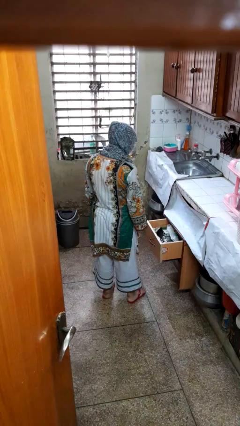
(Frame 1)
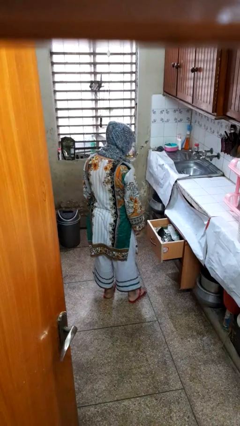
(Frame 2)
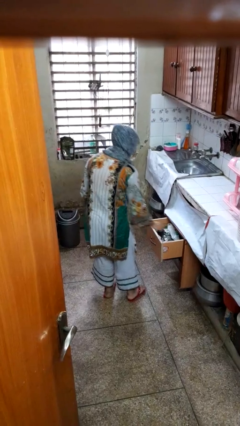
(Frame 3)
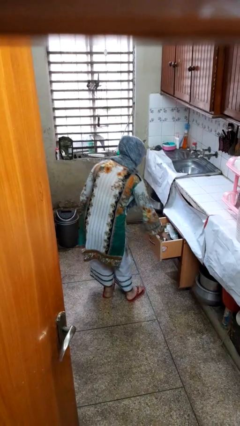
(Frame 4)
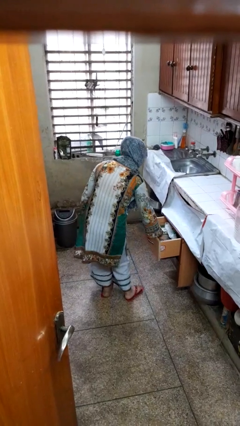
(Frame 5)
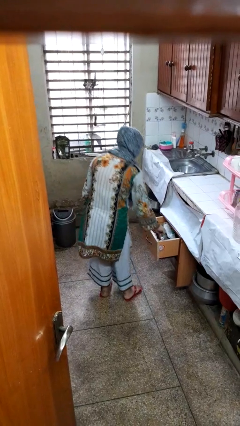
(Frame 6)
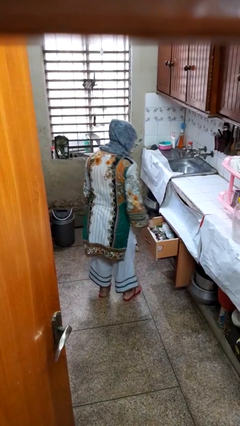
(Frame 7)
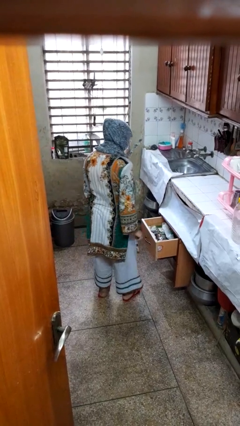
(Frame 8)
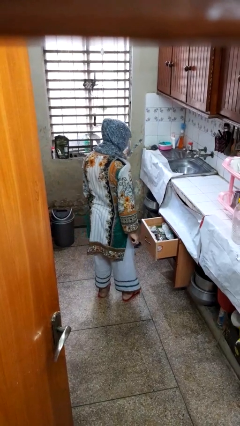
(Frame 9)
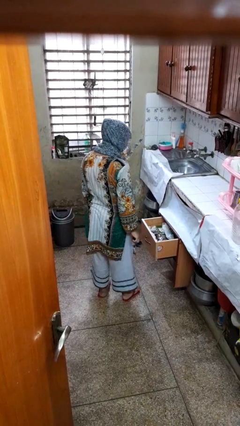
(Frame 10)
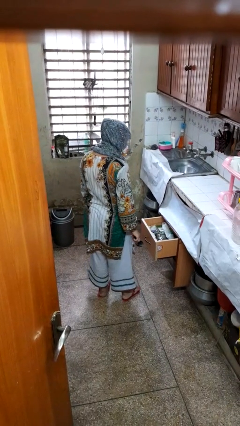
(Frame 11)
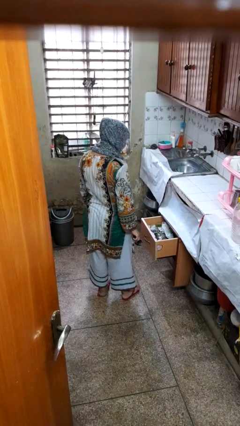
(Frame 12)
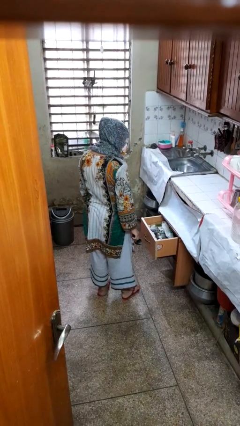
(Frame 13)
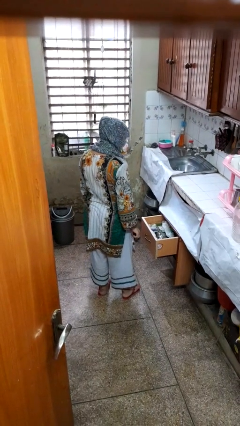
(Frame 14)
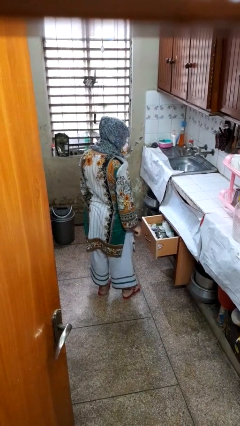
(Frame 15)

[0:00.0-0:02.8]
person takes object from kitchen drawer

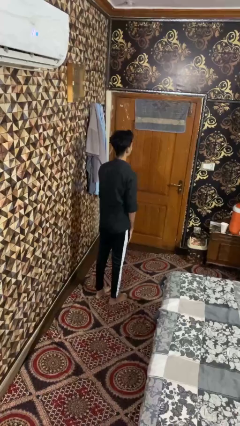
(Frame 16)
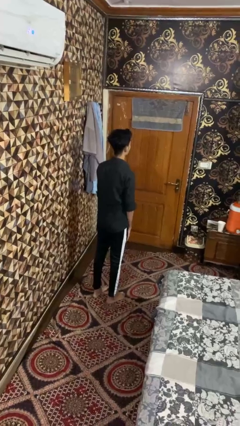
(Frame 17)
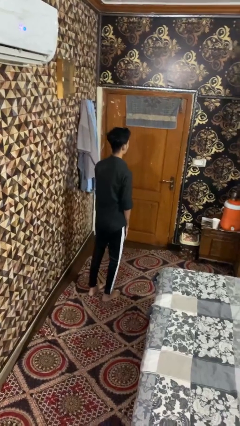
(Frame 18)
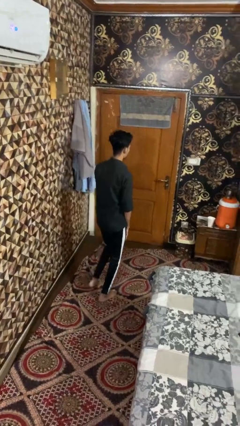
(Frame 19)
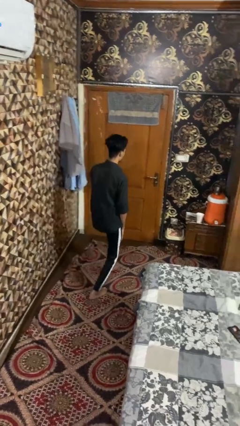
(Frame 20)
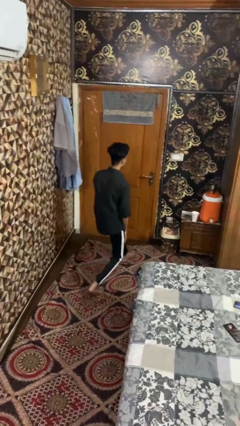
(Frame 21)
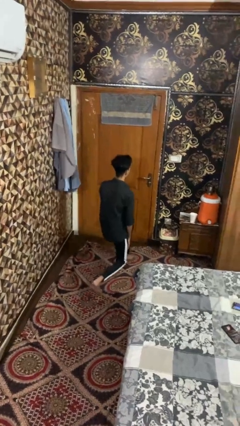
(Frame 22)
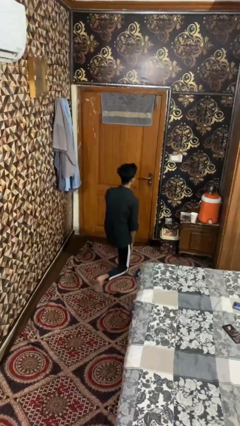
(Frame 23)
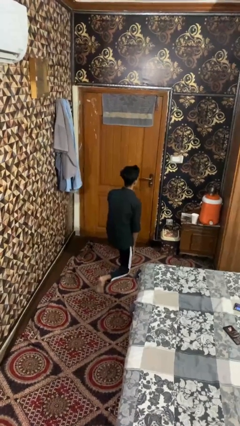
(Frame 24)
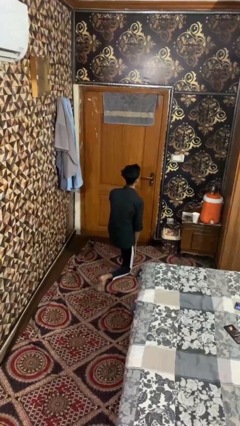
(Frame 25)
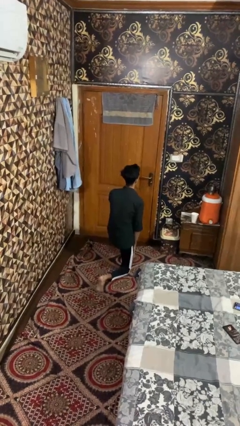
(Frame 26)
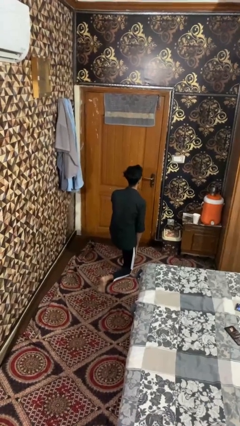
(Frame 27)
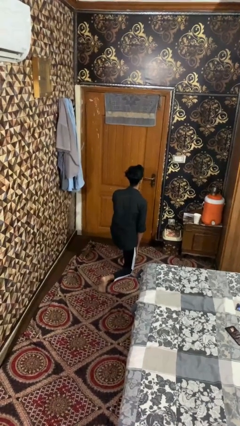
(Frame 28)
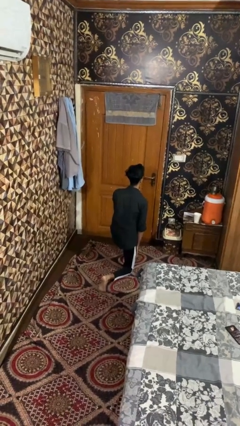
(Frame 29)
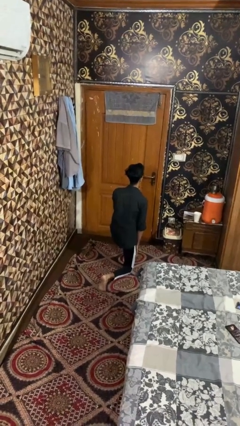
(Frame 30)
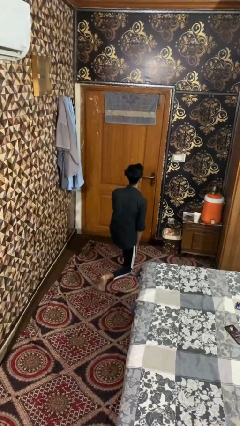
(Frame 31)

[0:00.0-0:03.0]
person exercises with lunges

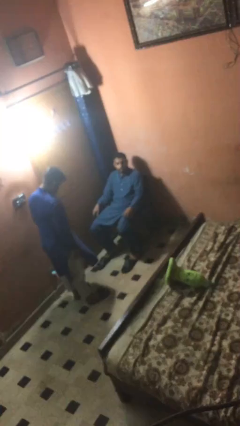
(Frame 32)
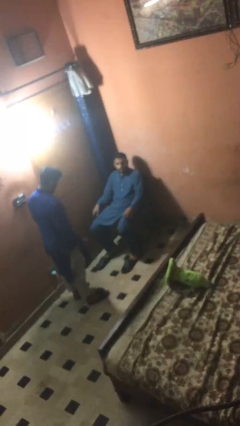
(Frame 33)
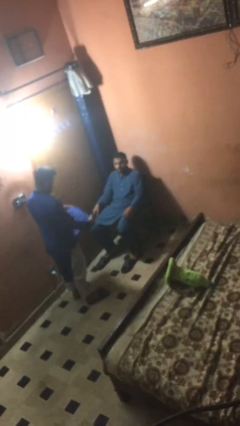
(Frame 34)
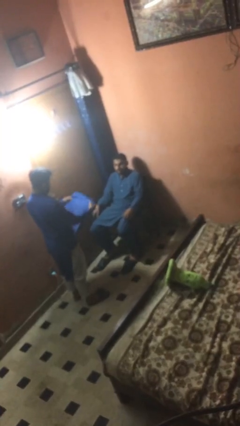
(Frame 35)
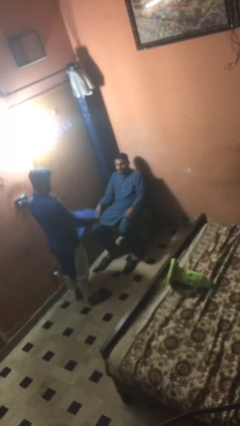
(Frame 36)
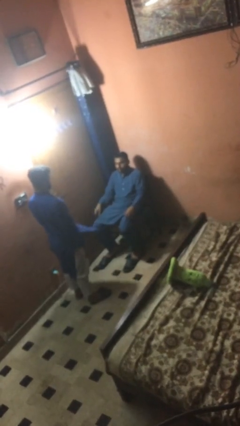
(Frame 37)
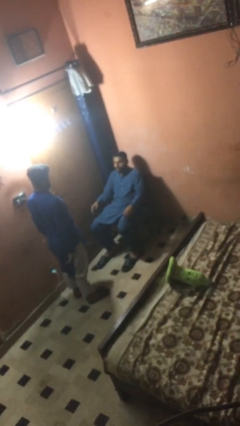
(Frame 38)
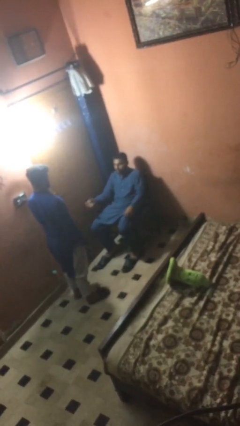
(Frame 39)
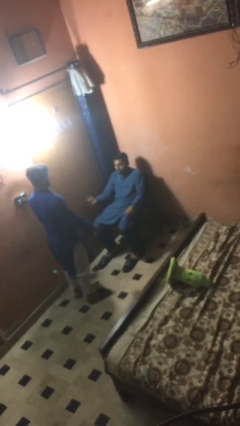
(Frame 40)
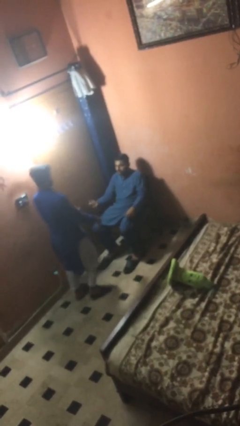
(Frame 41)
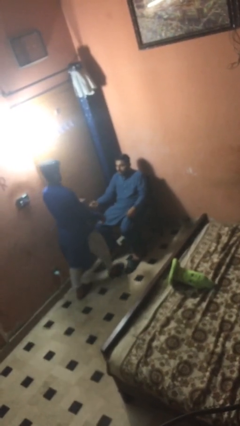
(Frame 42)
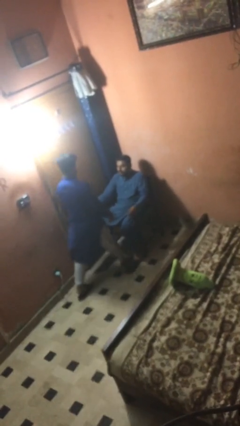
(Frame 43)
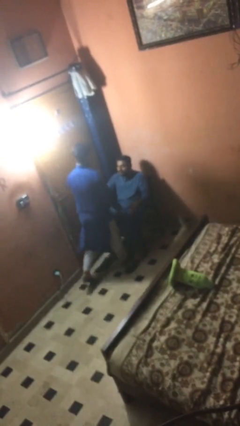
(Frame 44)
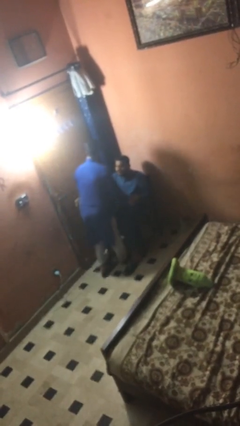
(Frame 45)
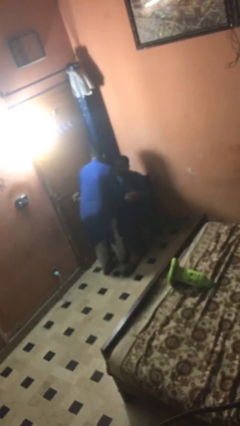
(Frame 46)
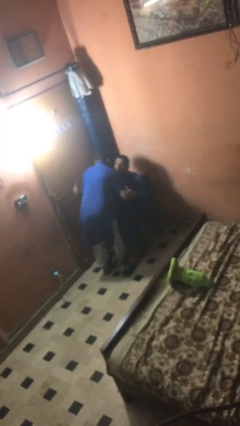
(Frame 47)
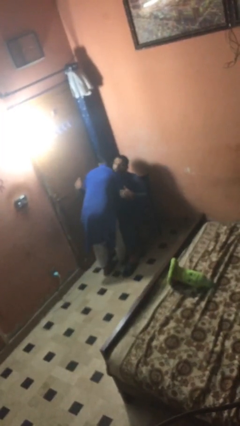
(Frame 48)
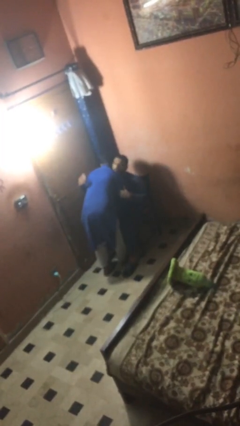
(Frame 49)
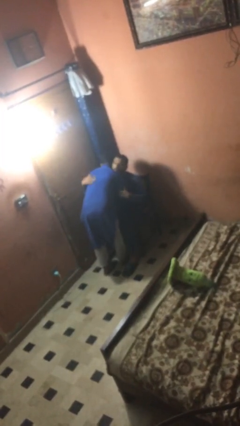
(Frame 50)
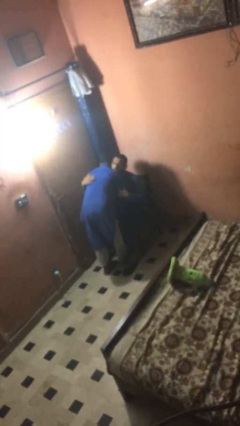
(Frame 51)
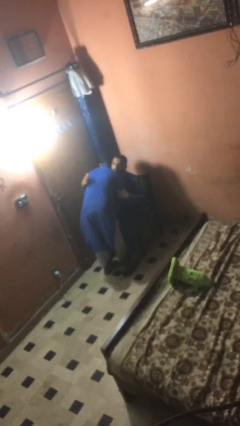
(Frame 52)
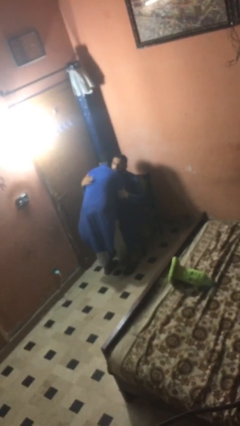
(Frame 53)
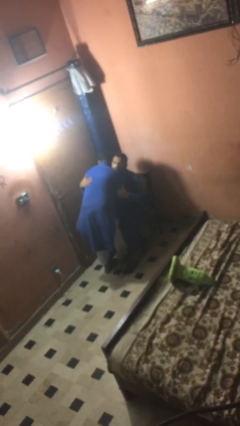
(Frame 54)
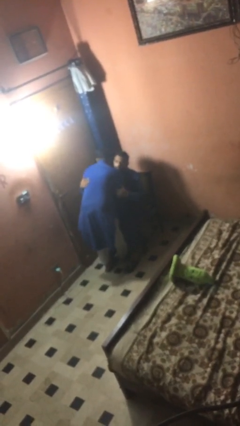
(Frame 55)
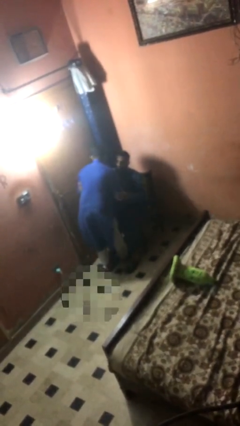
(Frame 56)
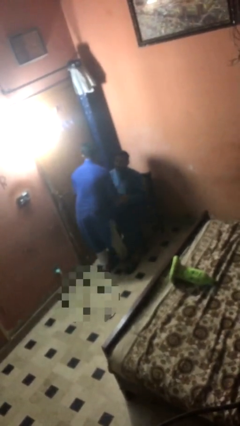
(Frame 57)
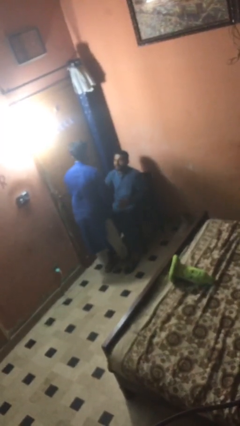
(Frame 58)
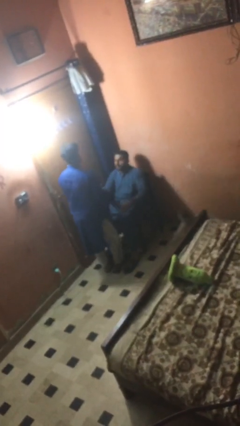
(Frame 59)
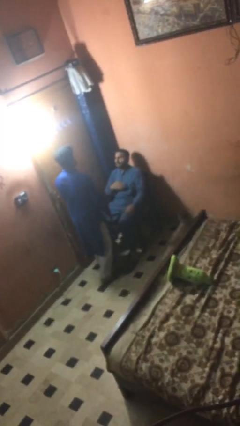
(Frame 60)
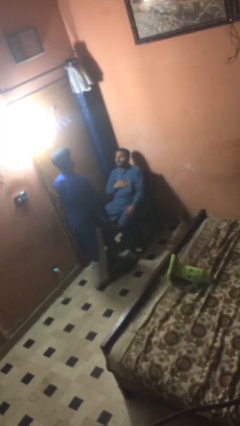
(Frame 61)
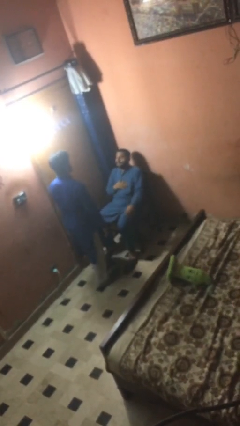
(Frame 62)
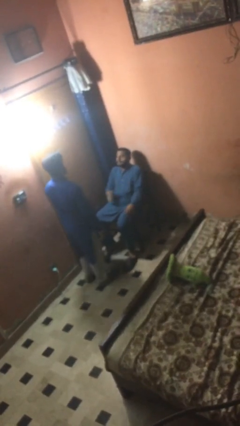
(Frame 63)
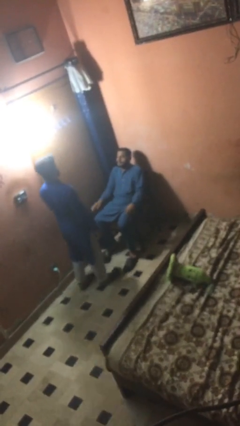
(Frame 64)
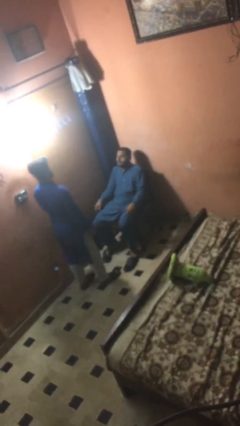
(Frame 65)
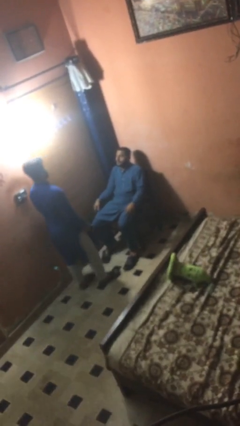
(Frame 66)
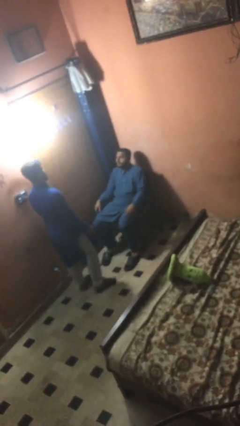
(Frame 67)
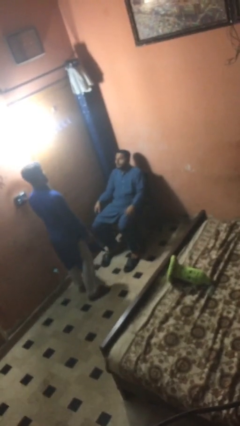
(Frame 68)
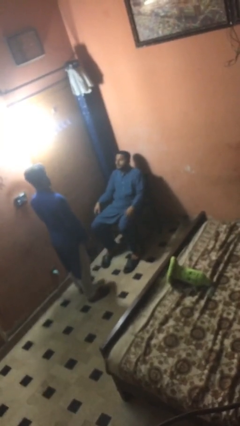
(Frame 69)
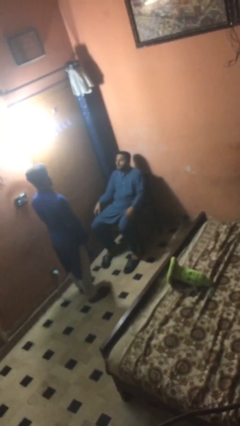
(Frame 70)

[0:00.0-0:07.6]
person embraces person

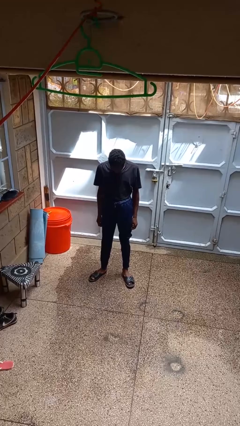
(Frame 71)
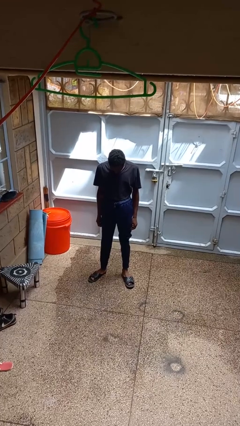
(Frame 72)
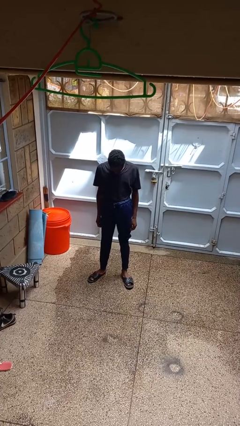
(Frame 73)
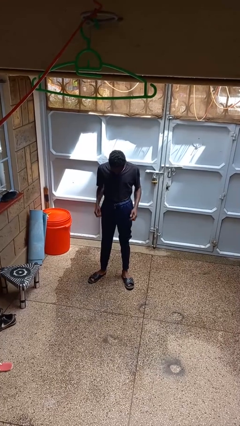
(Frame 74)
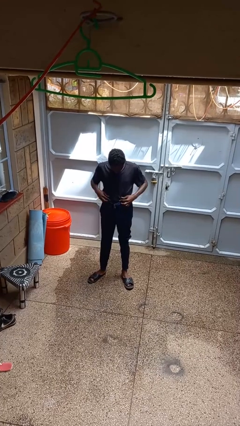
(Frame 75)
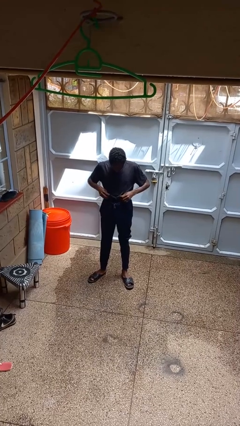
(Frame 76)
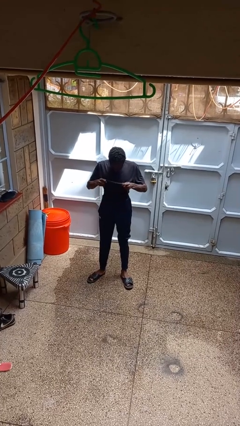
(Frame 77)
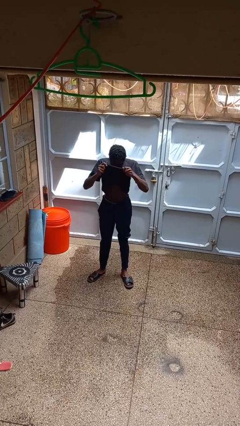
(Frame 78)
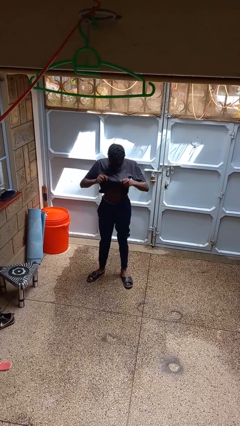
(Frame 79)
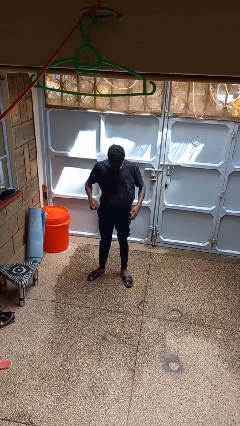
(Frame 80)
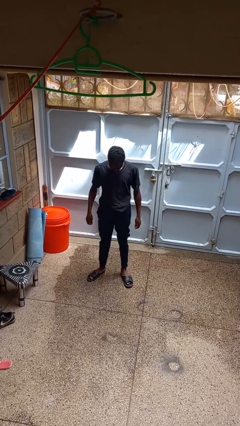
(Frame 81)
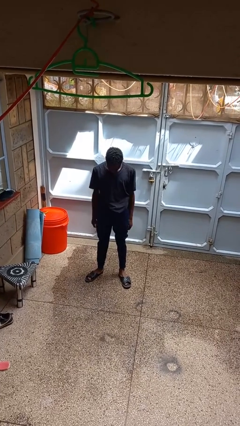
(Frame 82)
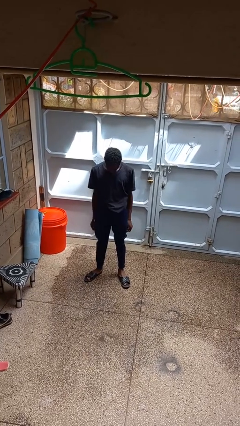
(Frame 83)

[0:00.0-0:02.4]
person untucks shirt

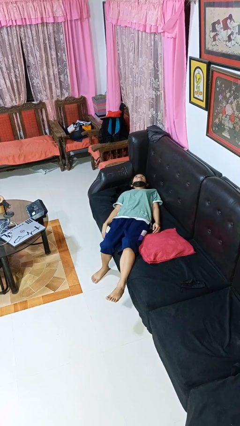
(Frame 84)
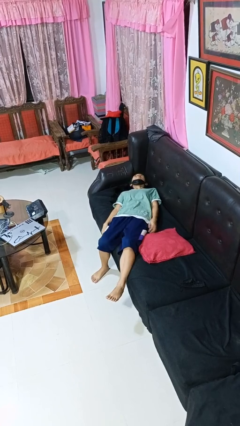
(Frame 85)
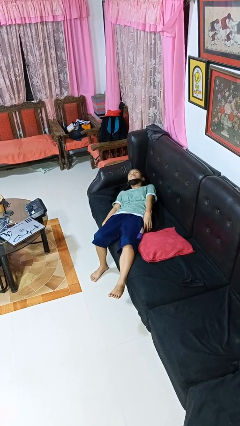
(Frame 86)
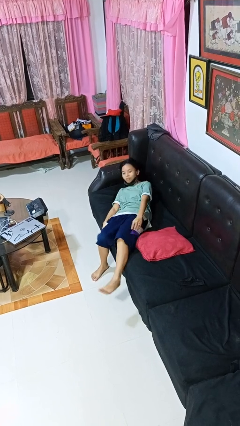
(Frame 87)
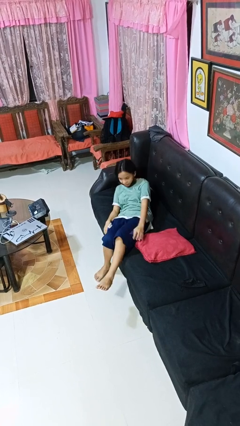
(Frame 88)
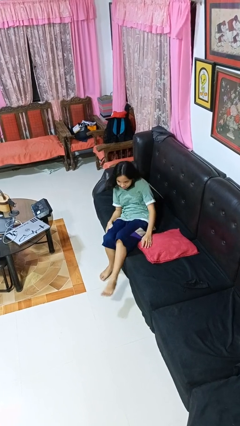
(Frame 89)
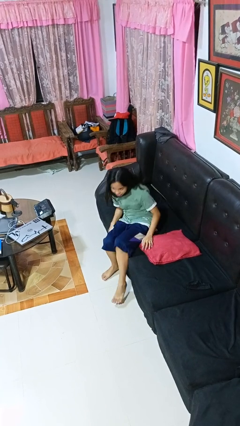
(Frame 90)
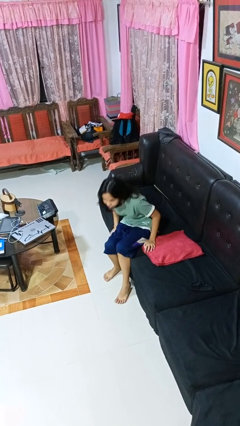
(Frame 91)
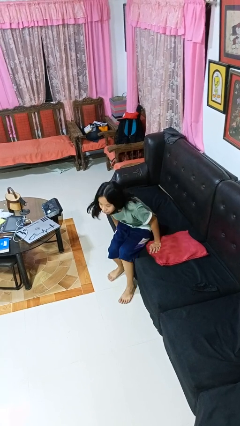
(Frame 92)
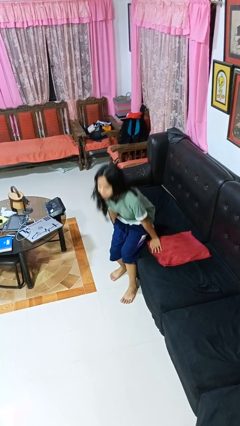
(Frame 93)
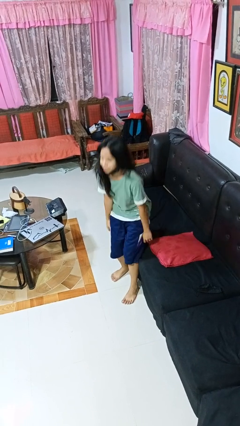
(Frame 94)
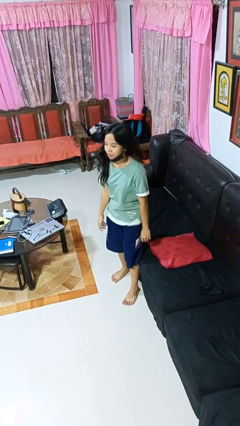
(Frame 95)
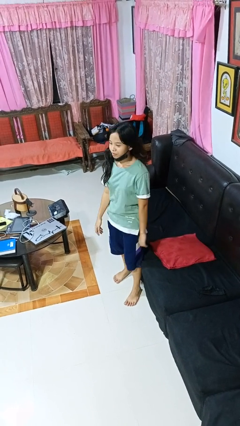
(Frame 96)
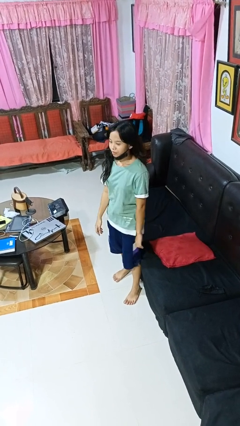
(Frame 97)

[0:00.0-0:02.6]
person stands up
